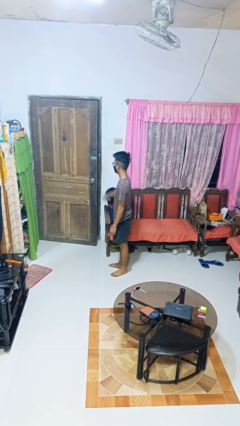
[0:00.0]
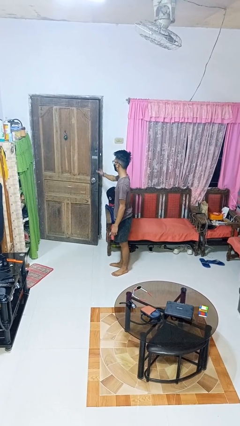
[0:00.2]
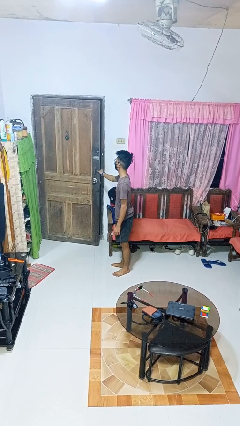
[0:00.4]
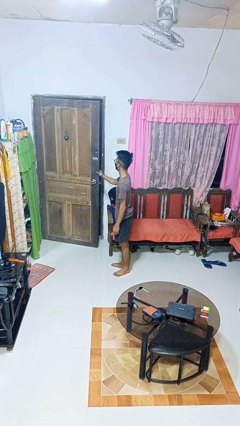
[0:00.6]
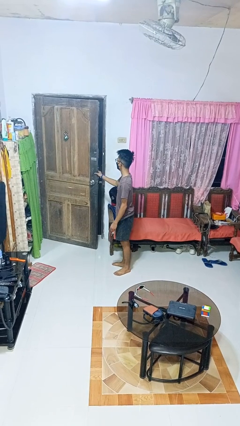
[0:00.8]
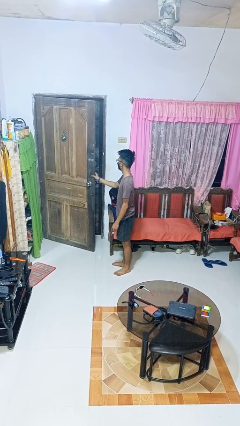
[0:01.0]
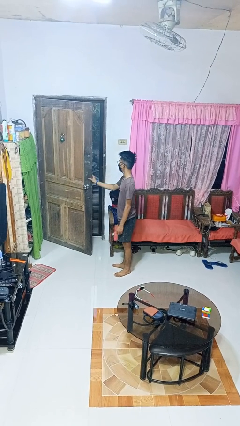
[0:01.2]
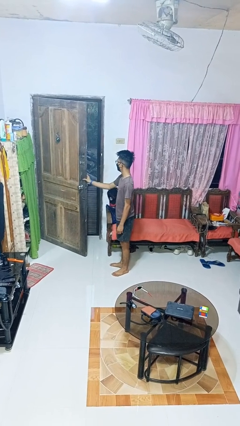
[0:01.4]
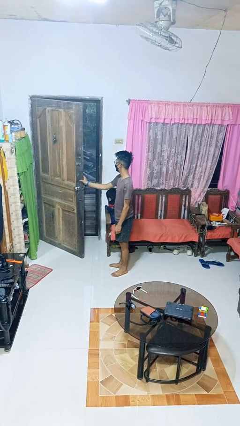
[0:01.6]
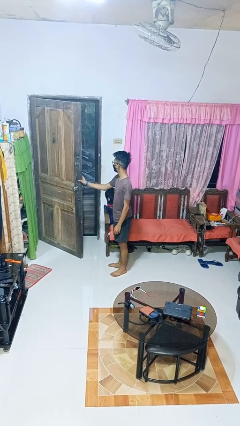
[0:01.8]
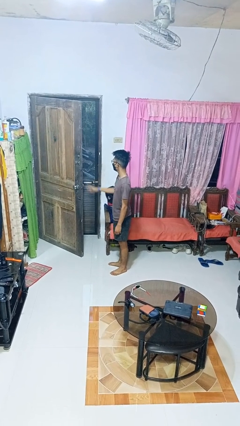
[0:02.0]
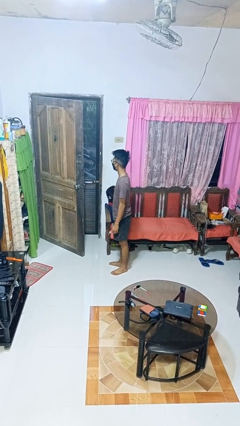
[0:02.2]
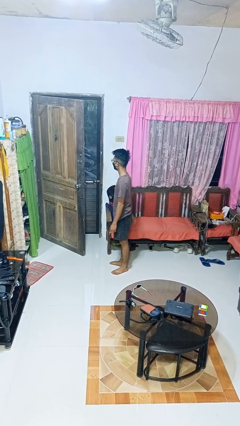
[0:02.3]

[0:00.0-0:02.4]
person opens facility door

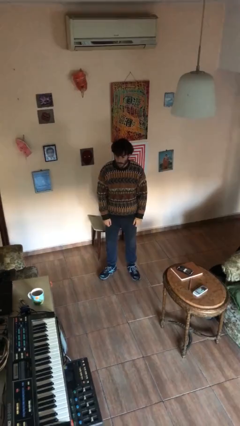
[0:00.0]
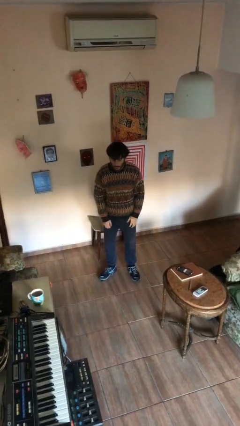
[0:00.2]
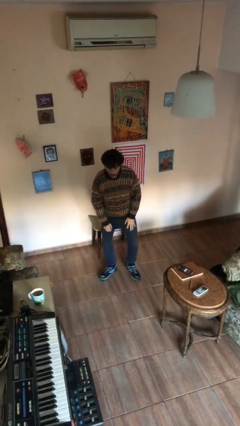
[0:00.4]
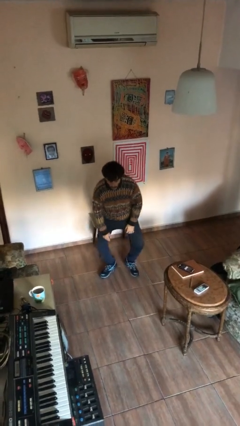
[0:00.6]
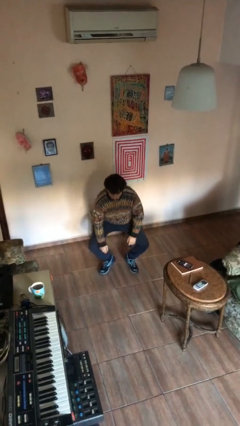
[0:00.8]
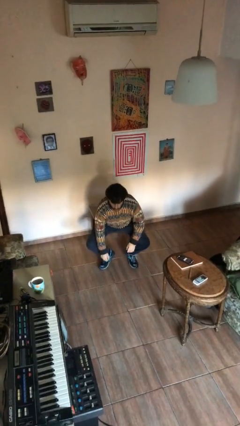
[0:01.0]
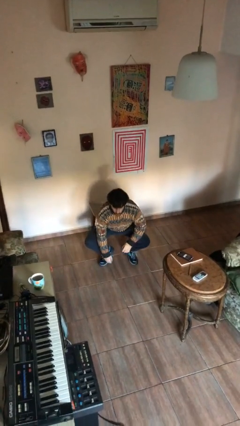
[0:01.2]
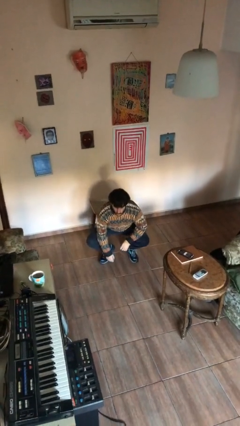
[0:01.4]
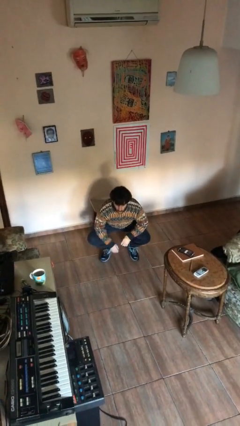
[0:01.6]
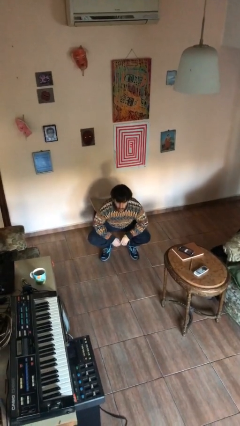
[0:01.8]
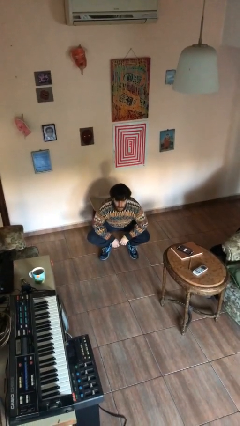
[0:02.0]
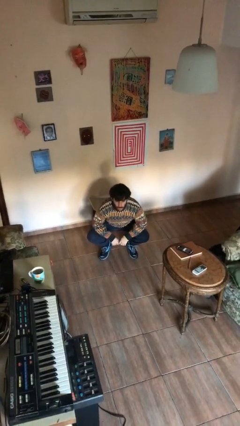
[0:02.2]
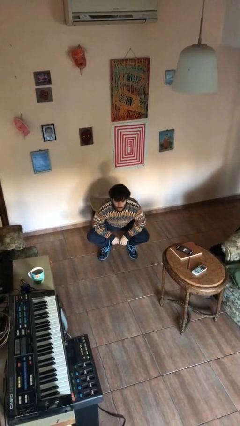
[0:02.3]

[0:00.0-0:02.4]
person squats

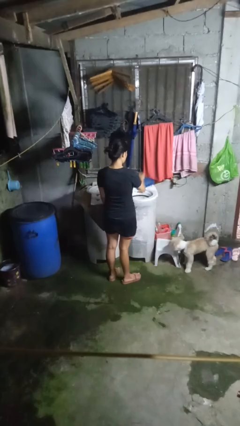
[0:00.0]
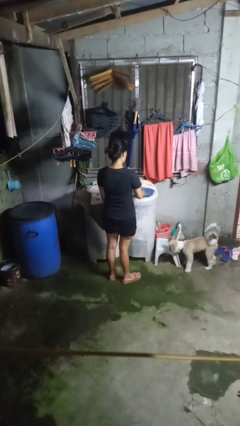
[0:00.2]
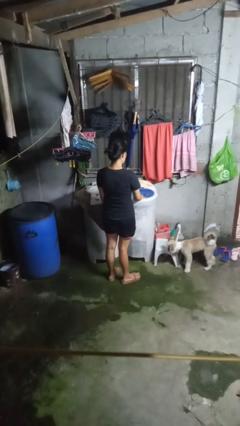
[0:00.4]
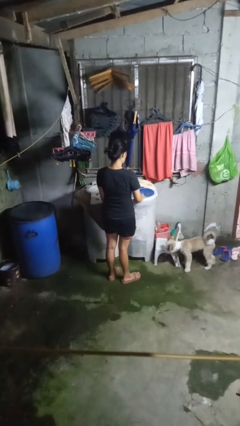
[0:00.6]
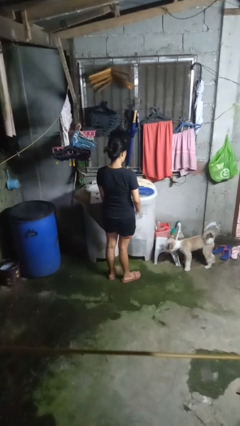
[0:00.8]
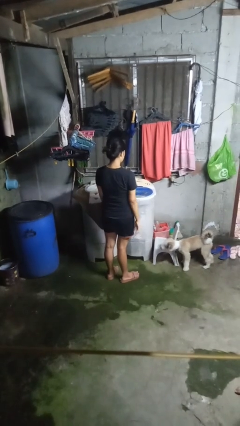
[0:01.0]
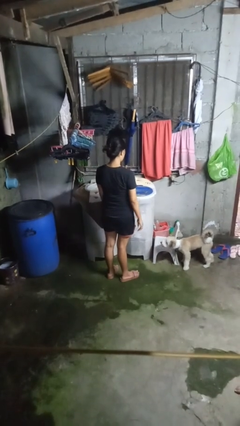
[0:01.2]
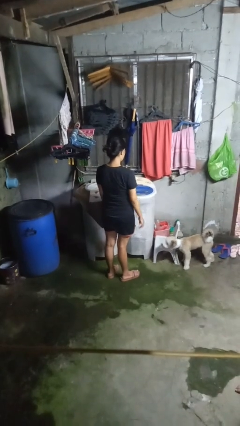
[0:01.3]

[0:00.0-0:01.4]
person closes clothes washer

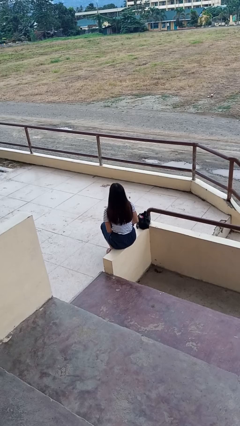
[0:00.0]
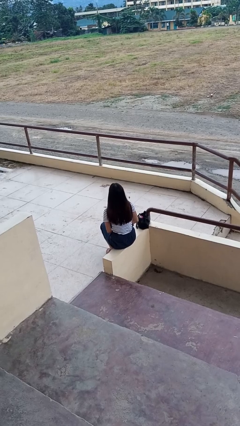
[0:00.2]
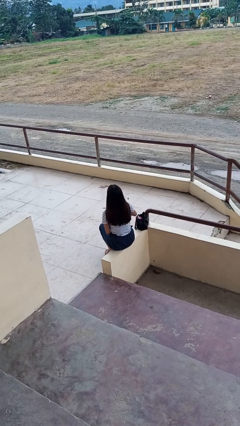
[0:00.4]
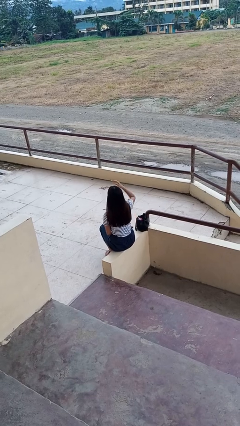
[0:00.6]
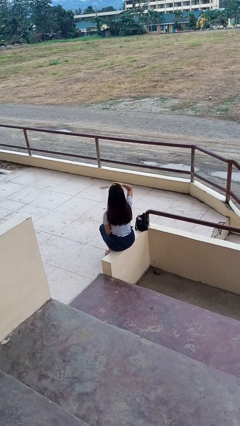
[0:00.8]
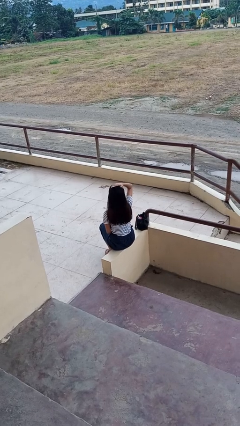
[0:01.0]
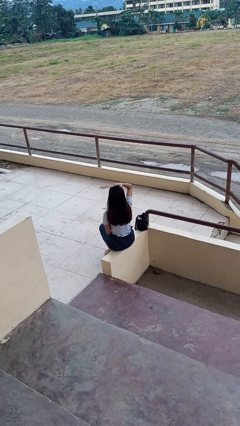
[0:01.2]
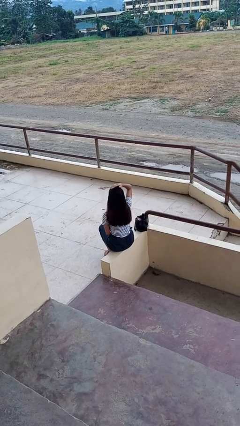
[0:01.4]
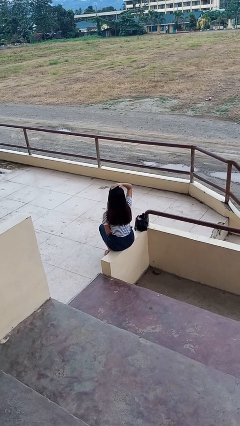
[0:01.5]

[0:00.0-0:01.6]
person pats head

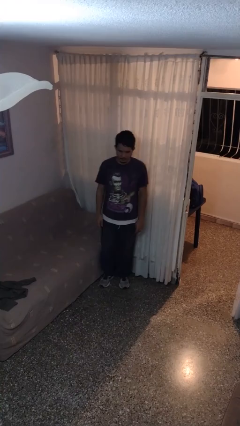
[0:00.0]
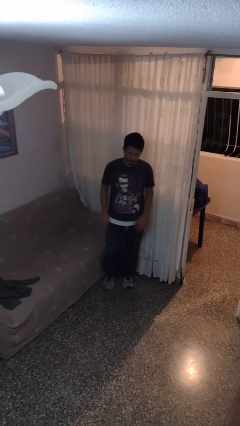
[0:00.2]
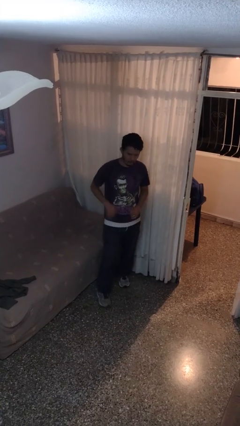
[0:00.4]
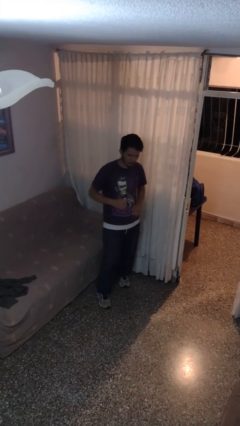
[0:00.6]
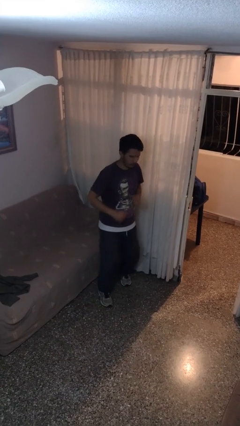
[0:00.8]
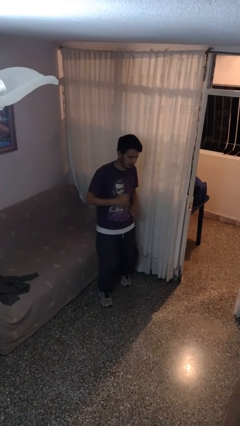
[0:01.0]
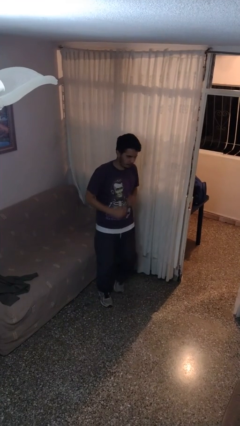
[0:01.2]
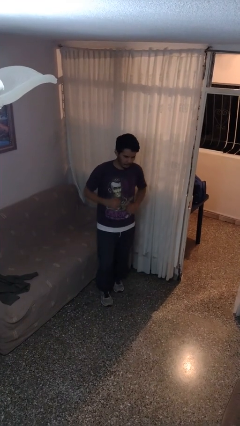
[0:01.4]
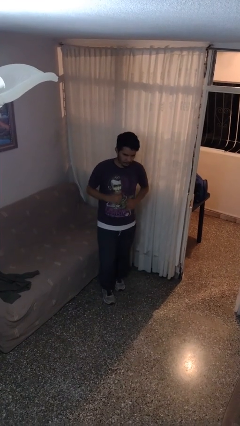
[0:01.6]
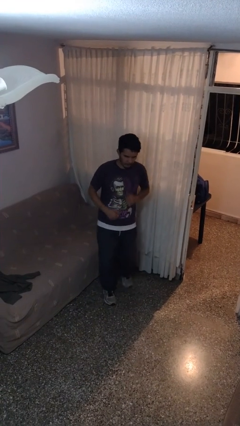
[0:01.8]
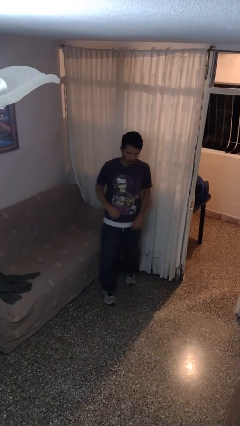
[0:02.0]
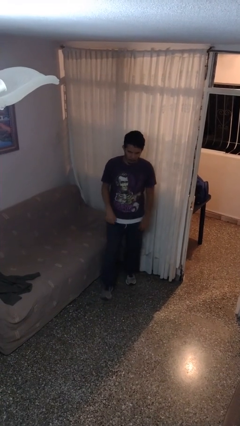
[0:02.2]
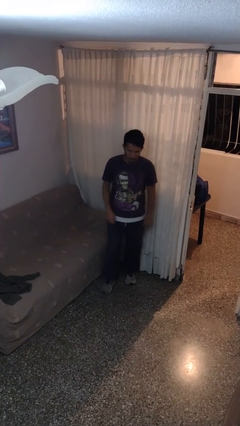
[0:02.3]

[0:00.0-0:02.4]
person dances in place

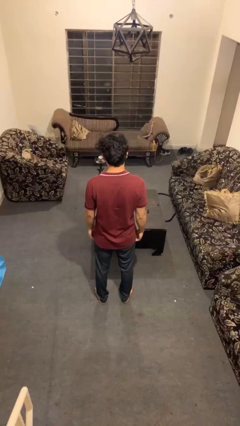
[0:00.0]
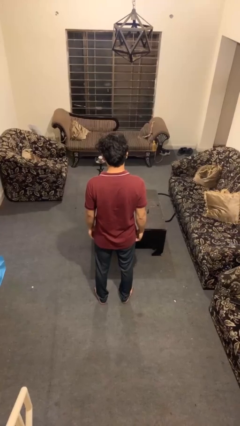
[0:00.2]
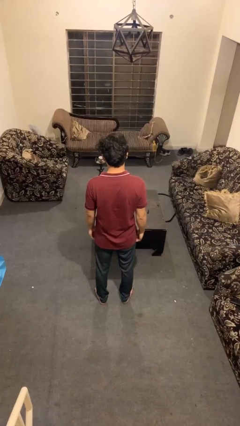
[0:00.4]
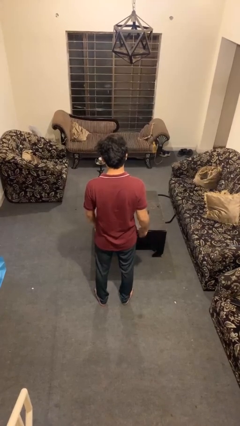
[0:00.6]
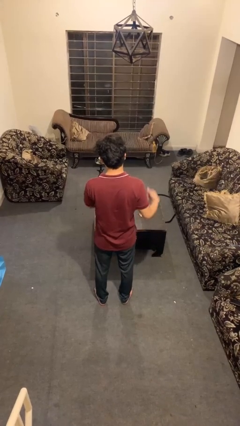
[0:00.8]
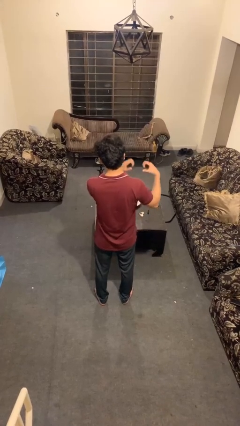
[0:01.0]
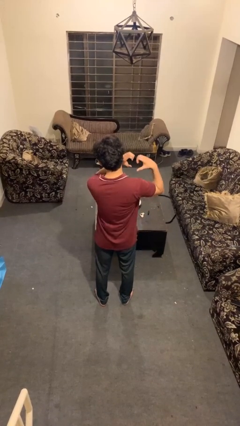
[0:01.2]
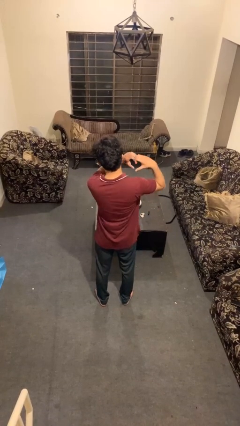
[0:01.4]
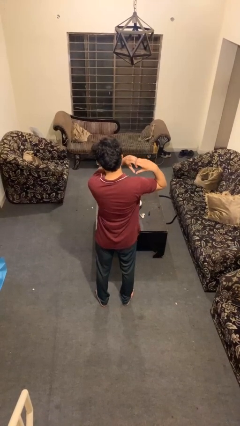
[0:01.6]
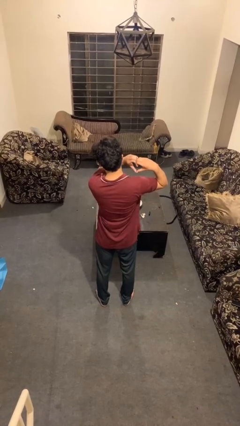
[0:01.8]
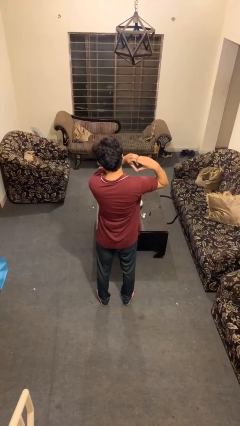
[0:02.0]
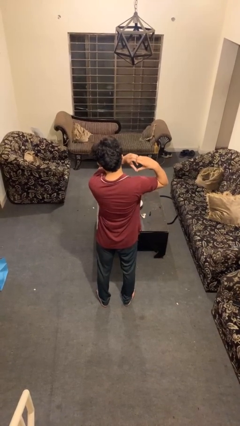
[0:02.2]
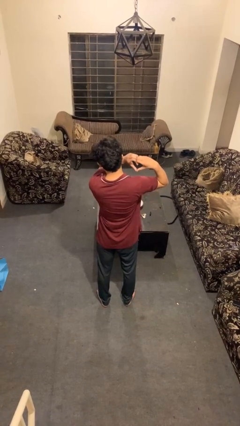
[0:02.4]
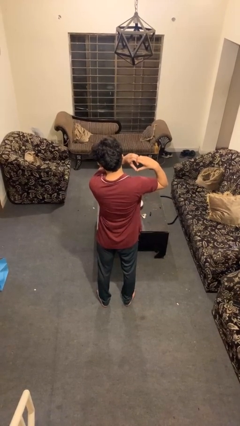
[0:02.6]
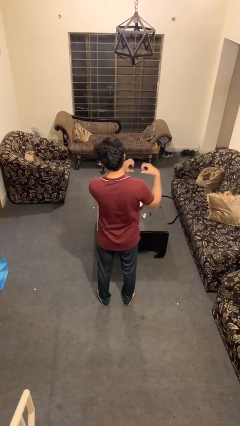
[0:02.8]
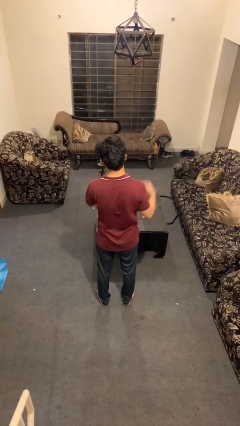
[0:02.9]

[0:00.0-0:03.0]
person gestures heart

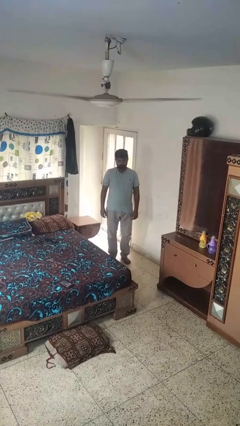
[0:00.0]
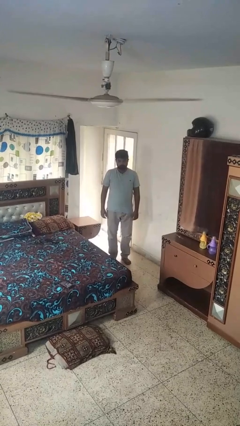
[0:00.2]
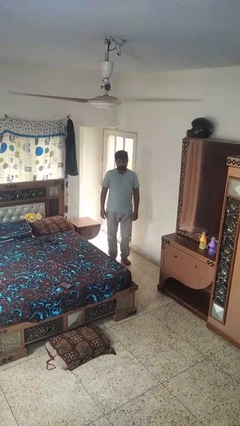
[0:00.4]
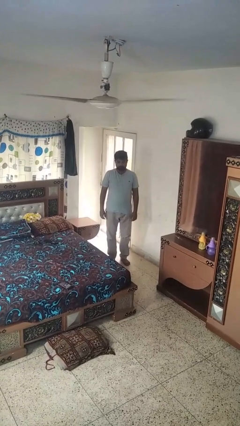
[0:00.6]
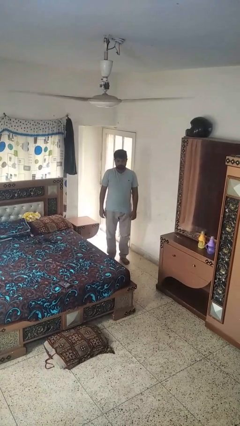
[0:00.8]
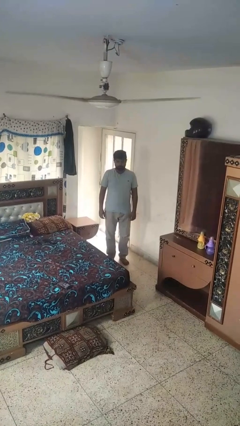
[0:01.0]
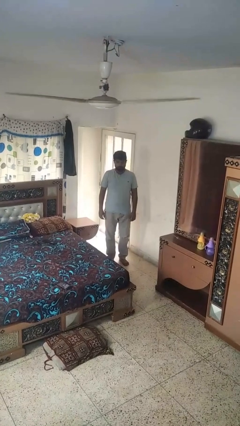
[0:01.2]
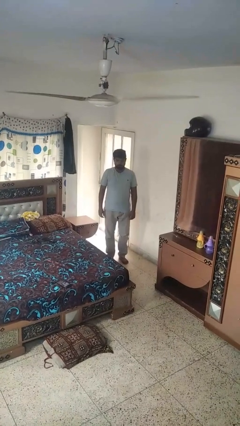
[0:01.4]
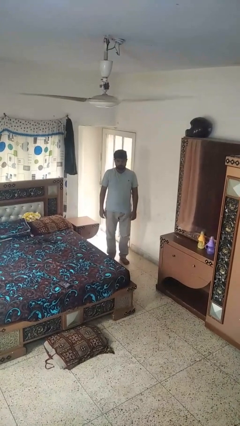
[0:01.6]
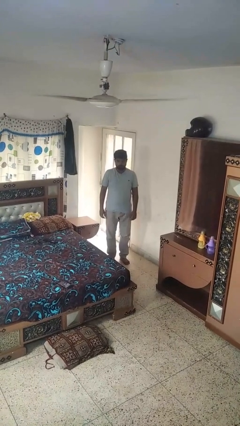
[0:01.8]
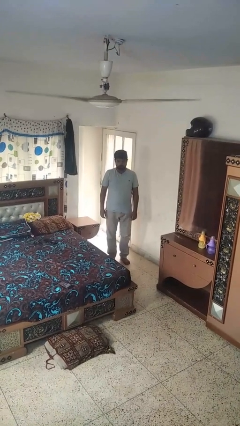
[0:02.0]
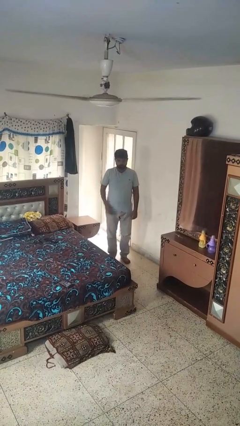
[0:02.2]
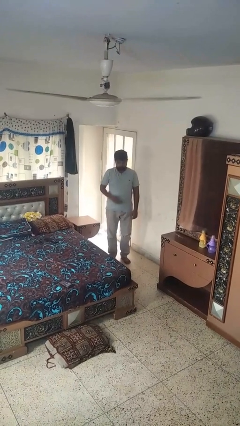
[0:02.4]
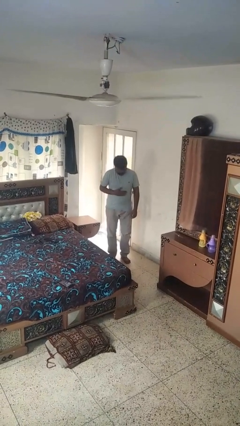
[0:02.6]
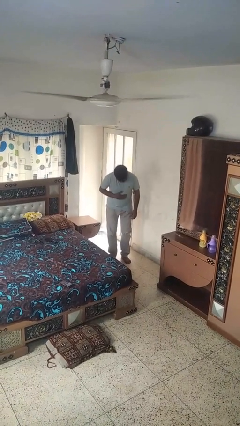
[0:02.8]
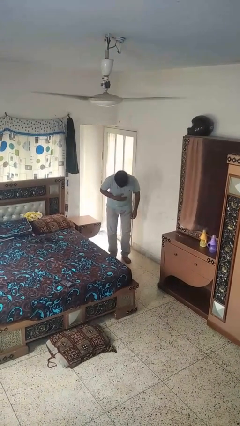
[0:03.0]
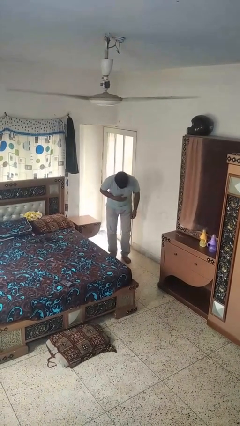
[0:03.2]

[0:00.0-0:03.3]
person bows

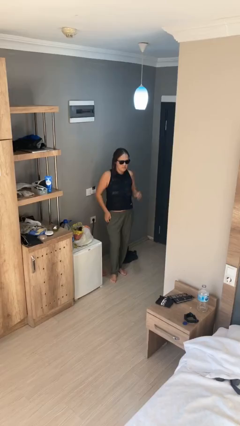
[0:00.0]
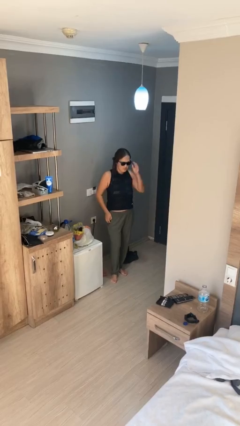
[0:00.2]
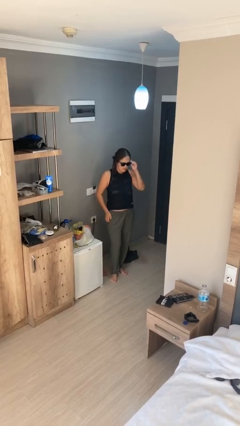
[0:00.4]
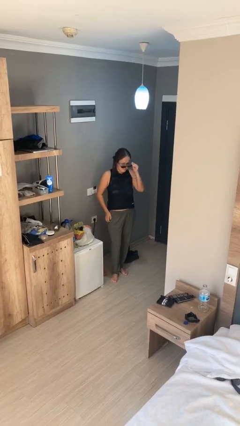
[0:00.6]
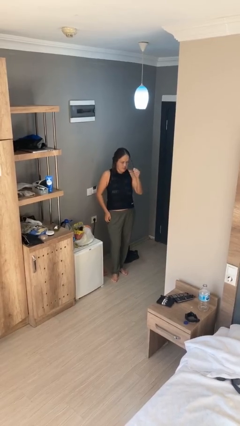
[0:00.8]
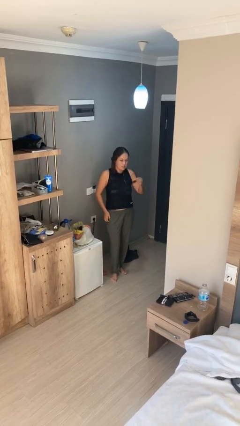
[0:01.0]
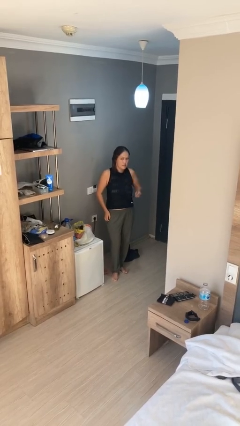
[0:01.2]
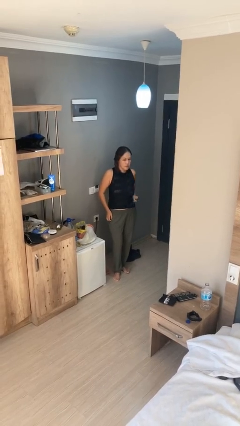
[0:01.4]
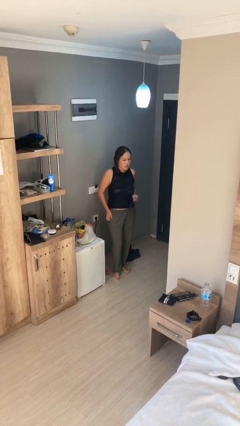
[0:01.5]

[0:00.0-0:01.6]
person takes off sunglasses
